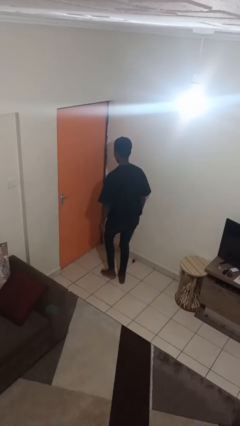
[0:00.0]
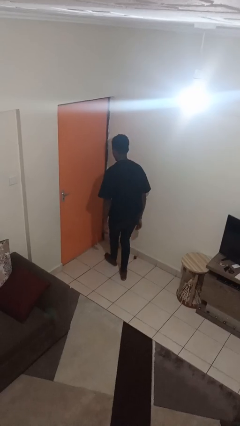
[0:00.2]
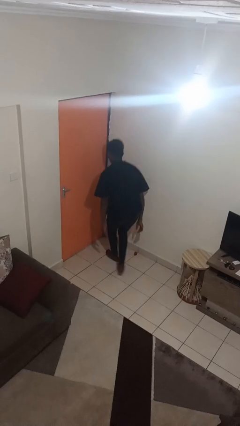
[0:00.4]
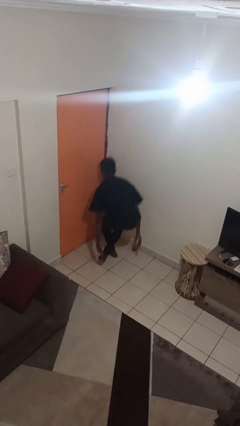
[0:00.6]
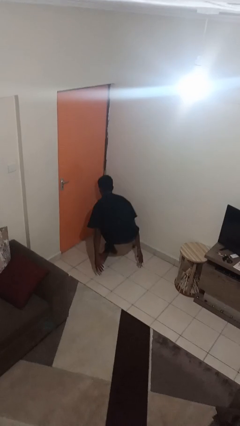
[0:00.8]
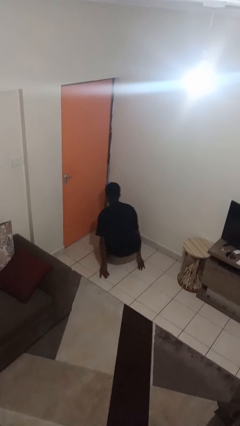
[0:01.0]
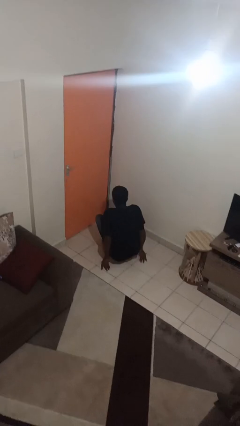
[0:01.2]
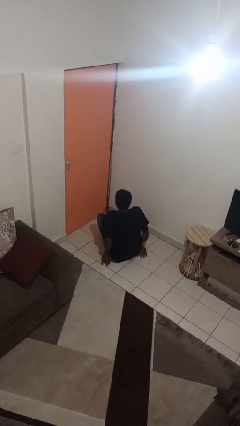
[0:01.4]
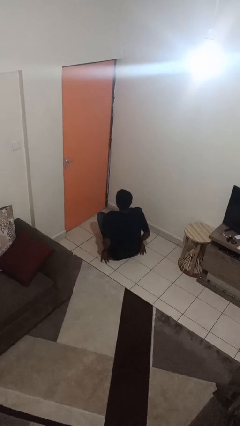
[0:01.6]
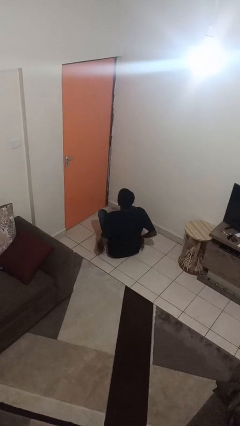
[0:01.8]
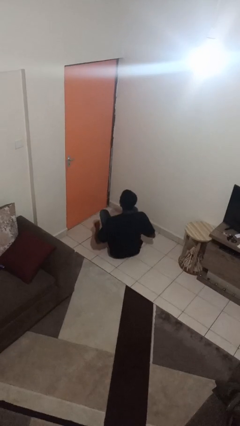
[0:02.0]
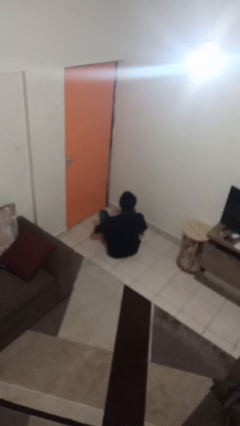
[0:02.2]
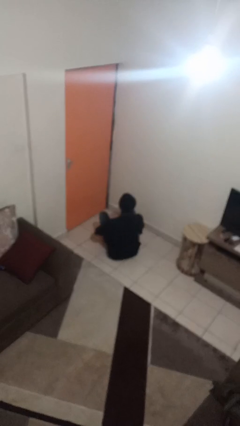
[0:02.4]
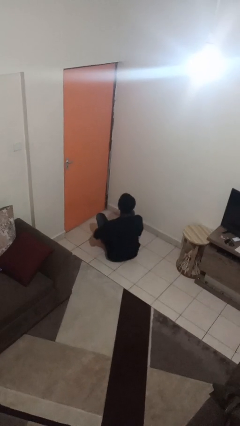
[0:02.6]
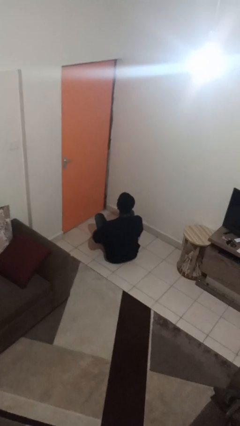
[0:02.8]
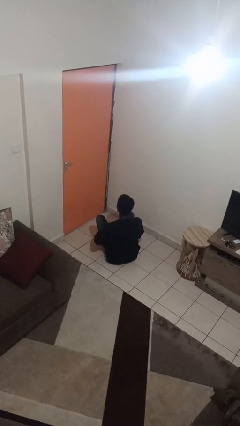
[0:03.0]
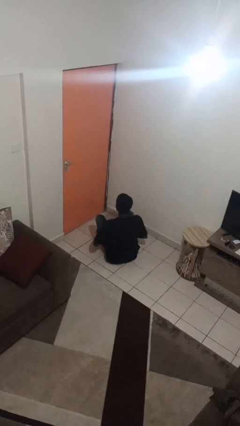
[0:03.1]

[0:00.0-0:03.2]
person sits crisscross

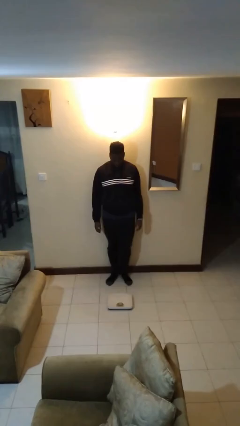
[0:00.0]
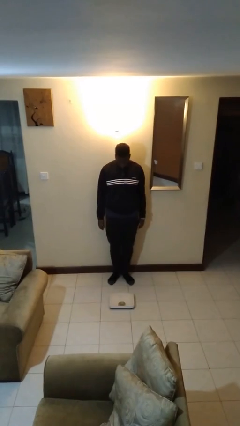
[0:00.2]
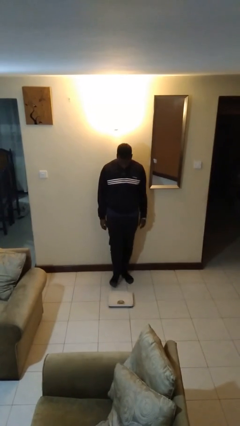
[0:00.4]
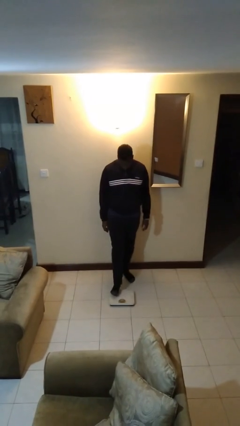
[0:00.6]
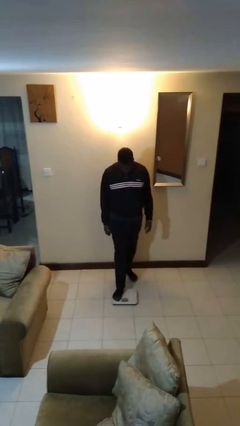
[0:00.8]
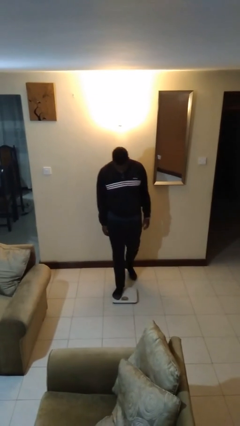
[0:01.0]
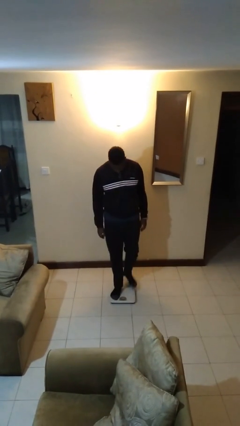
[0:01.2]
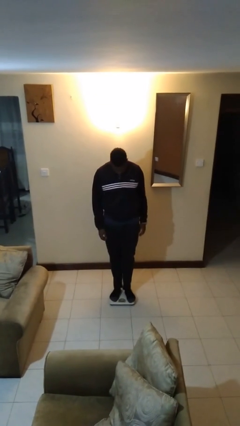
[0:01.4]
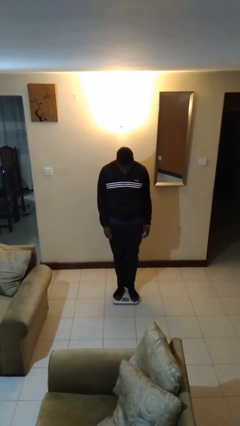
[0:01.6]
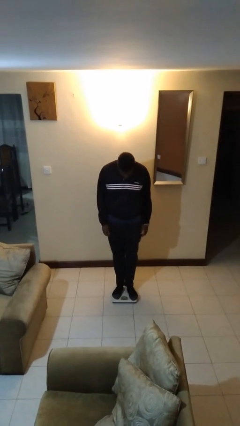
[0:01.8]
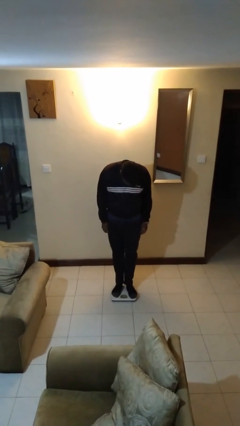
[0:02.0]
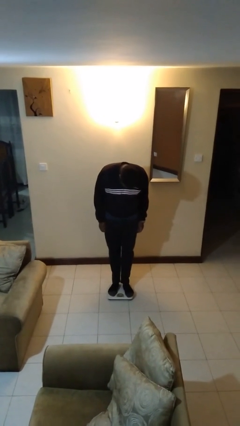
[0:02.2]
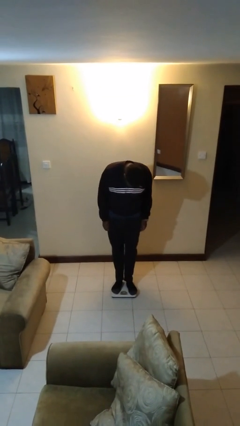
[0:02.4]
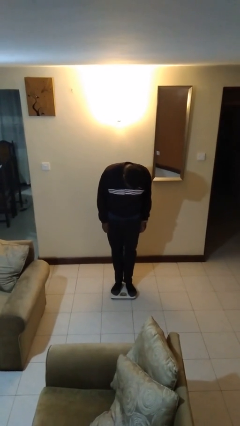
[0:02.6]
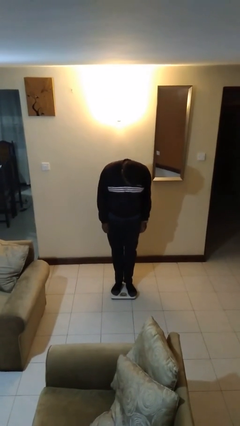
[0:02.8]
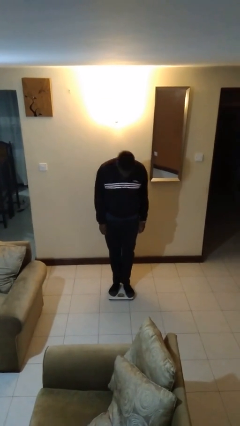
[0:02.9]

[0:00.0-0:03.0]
person uses bodyweight scale

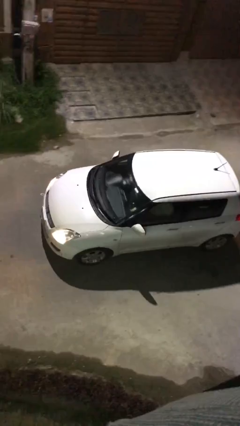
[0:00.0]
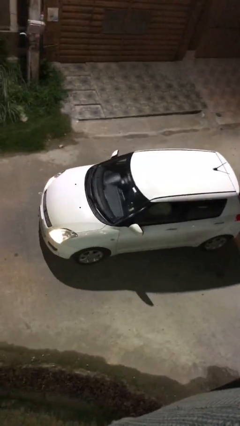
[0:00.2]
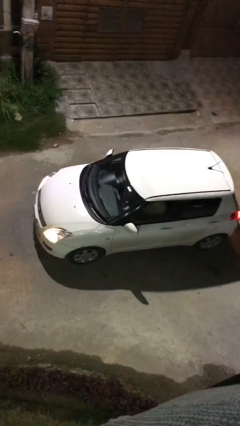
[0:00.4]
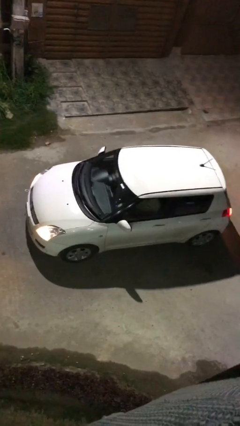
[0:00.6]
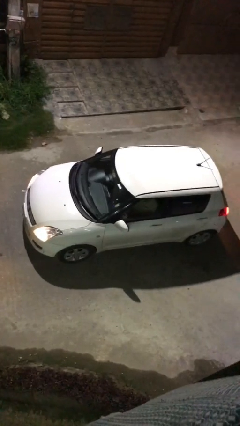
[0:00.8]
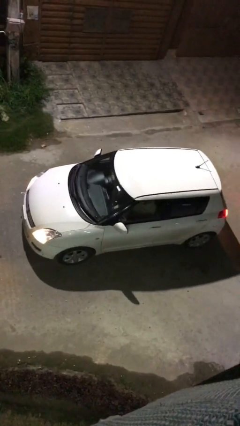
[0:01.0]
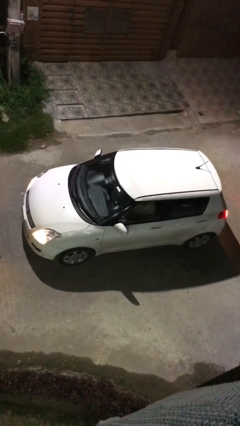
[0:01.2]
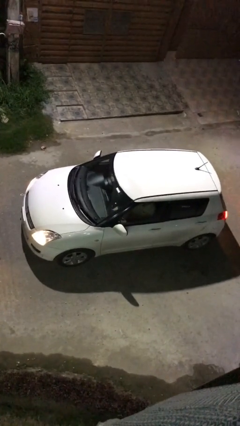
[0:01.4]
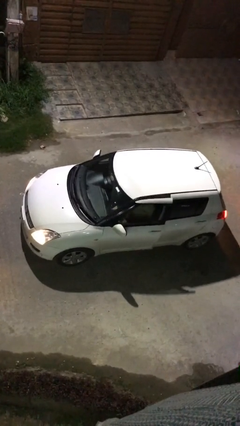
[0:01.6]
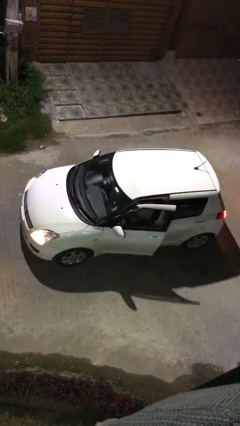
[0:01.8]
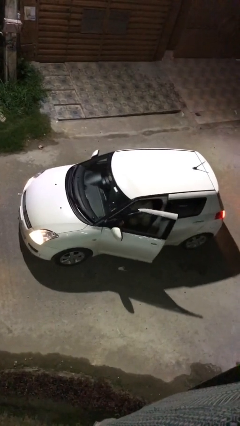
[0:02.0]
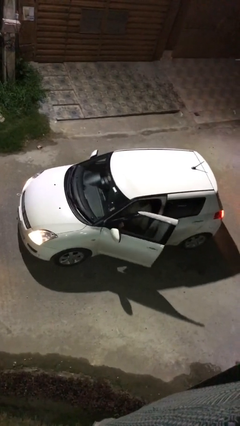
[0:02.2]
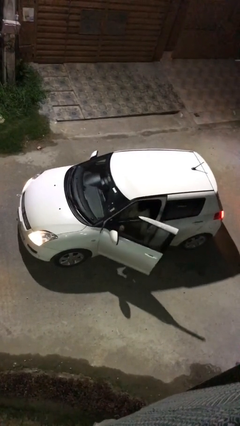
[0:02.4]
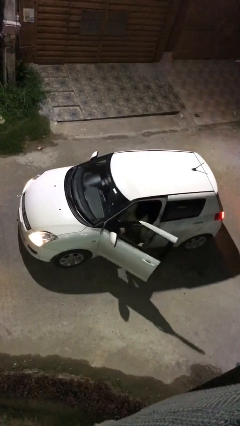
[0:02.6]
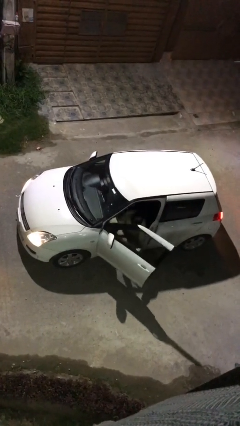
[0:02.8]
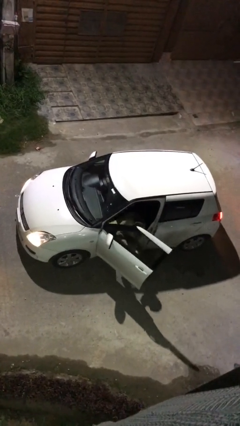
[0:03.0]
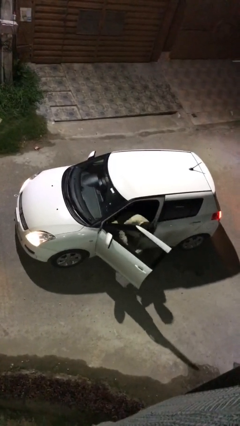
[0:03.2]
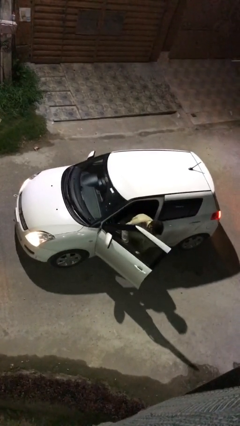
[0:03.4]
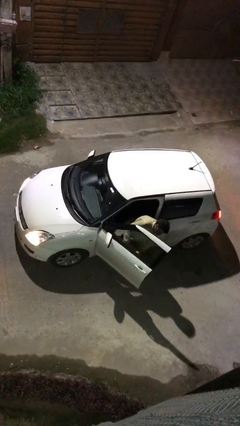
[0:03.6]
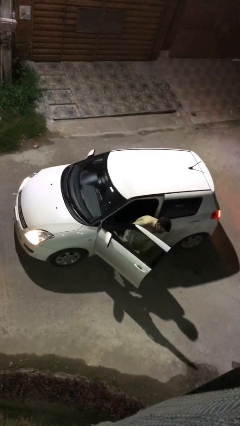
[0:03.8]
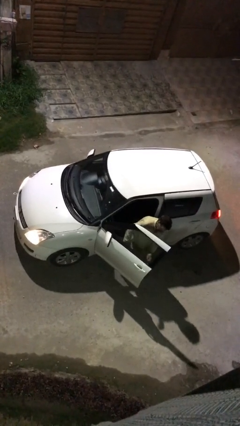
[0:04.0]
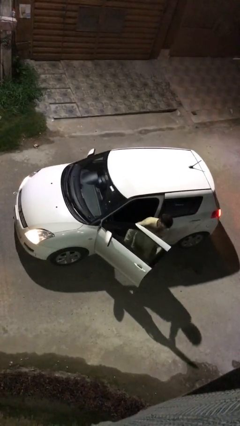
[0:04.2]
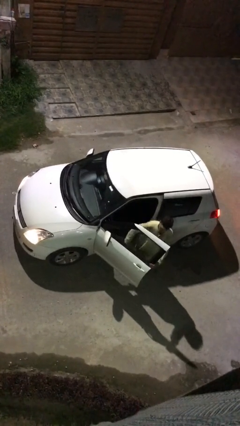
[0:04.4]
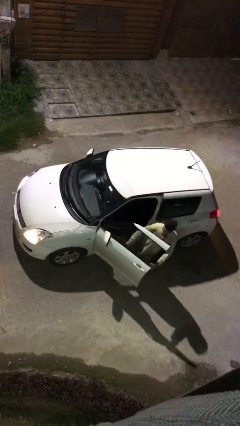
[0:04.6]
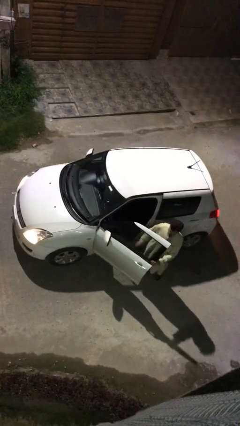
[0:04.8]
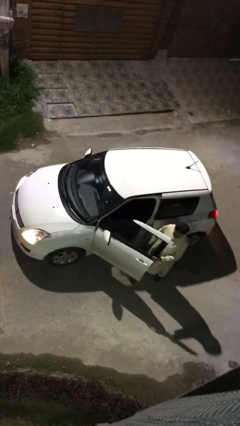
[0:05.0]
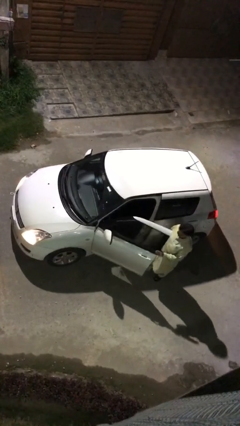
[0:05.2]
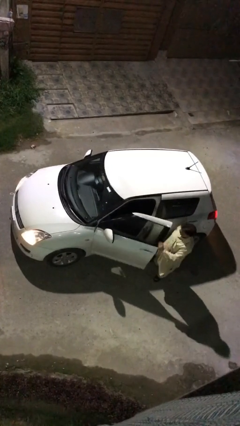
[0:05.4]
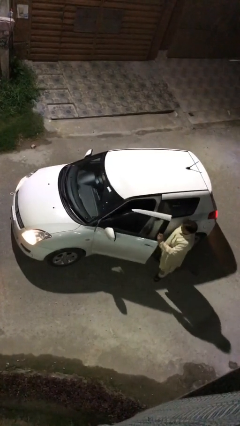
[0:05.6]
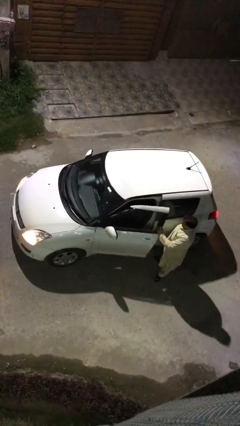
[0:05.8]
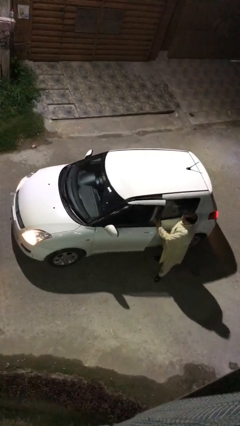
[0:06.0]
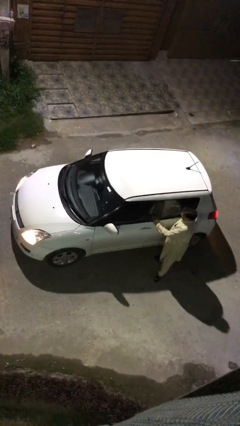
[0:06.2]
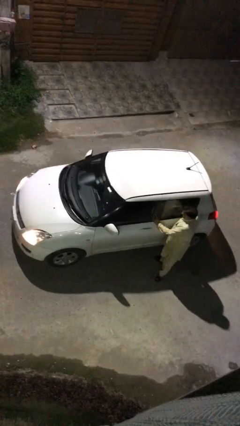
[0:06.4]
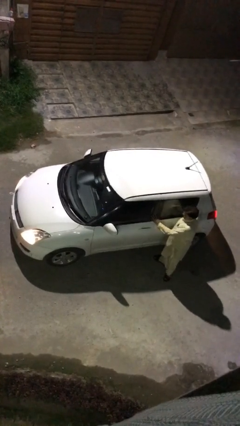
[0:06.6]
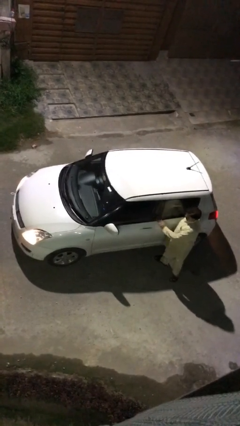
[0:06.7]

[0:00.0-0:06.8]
car drops off person

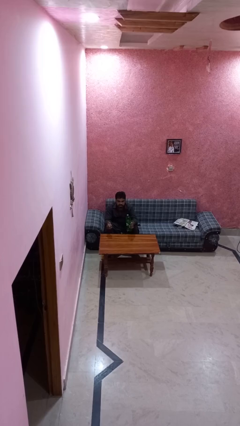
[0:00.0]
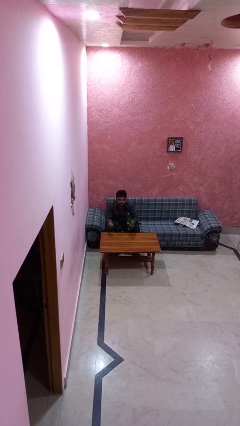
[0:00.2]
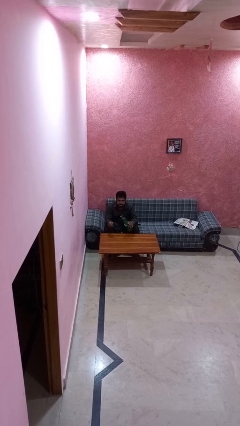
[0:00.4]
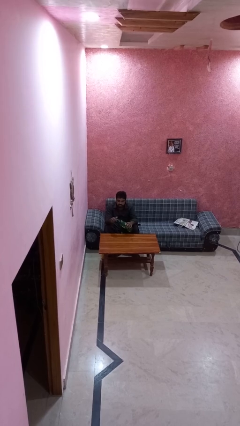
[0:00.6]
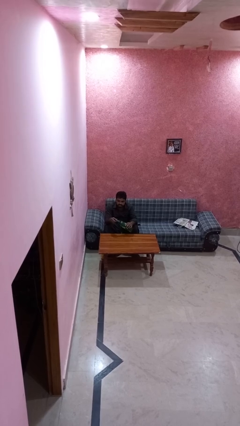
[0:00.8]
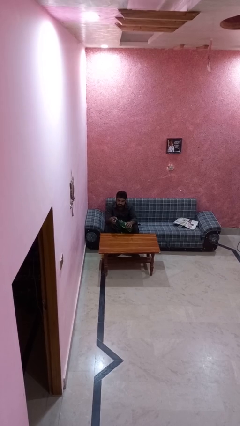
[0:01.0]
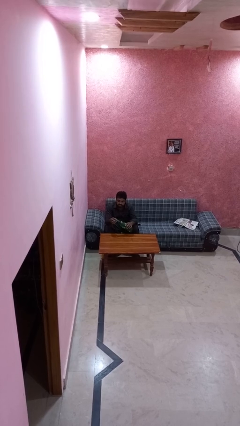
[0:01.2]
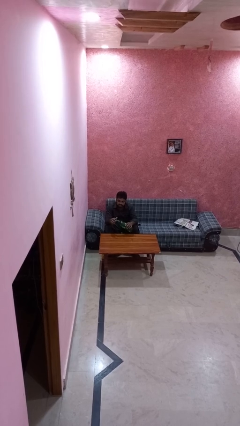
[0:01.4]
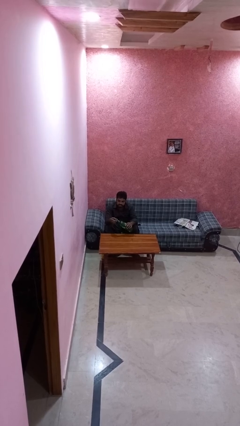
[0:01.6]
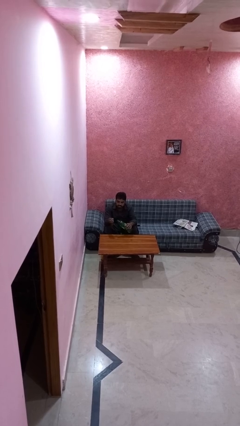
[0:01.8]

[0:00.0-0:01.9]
person unscrews lid from bottle

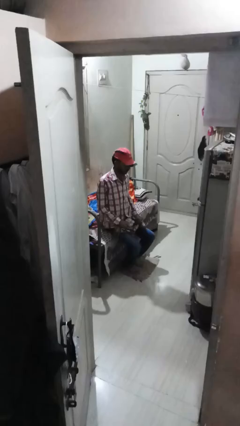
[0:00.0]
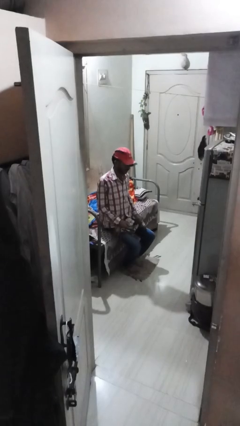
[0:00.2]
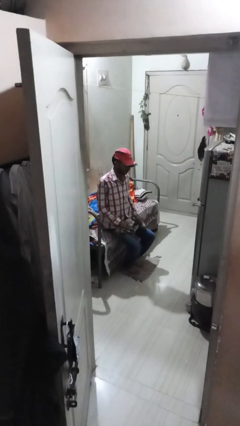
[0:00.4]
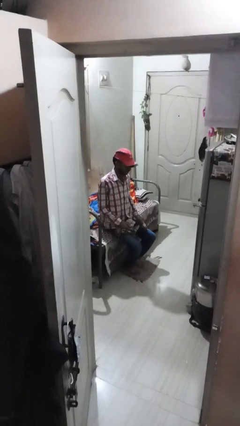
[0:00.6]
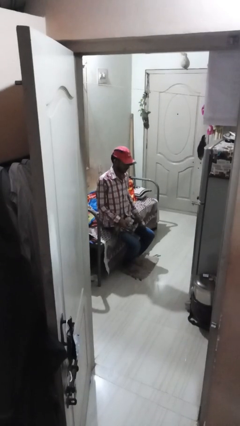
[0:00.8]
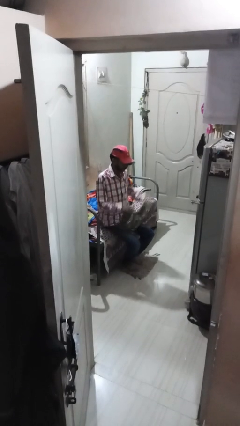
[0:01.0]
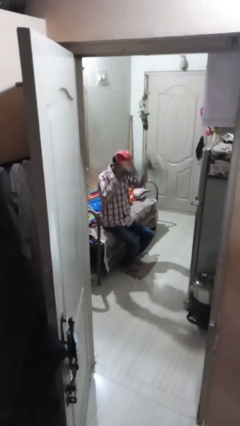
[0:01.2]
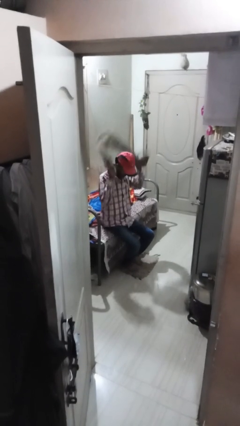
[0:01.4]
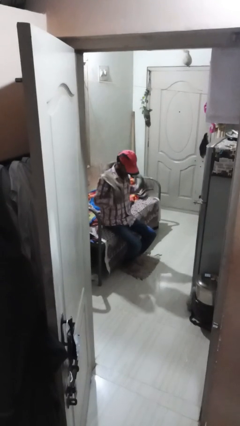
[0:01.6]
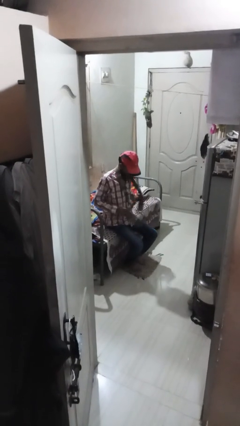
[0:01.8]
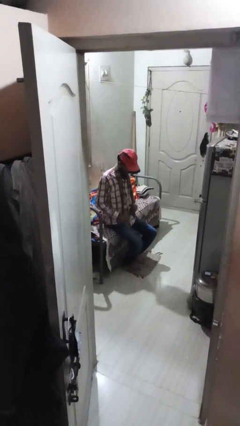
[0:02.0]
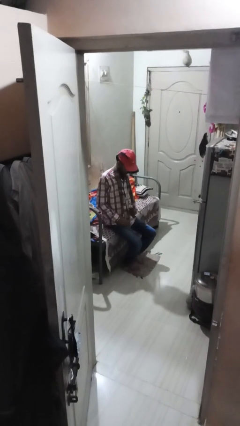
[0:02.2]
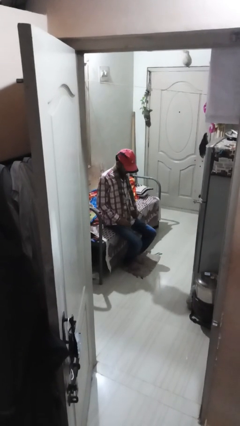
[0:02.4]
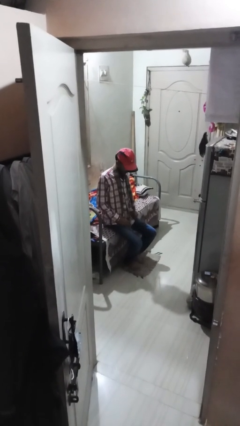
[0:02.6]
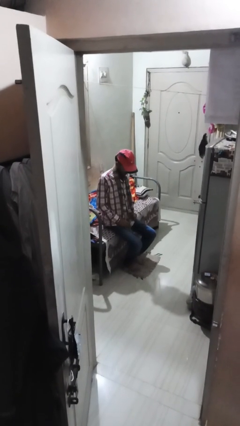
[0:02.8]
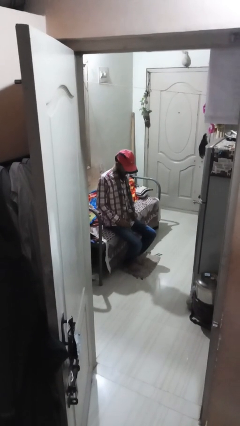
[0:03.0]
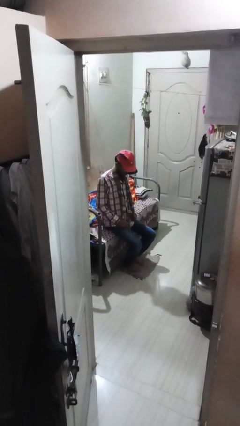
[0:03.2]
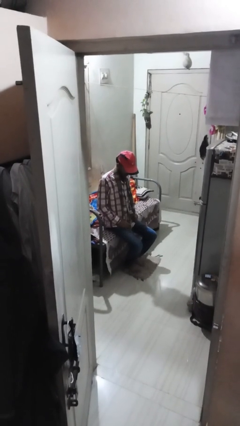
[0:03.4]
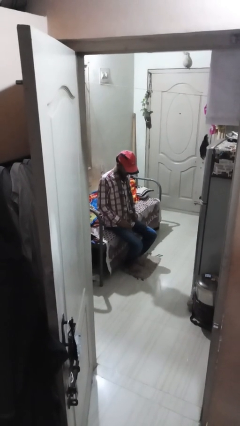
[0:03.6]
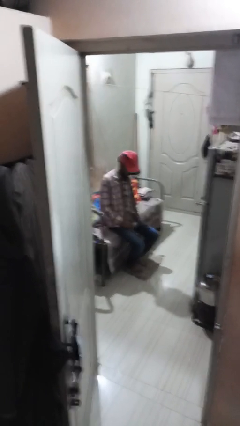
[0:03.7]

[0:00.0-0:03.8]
person puts on scarf
